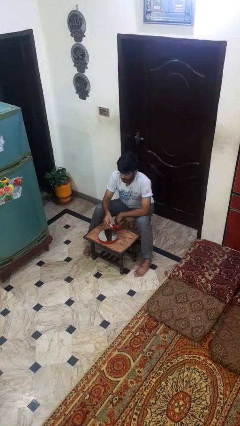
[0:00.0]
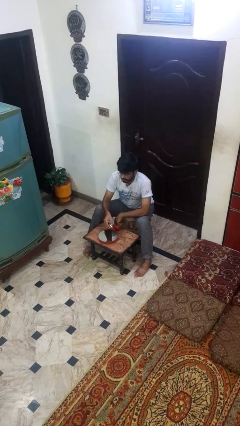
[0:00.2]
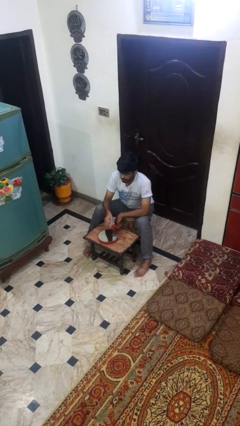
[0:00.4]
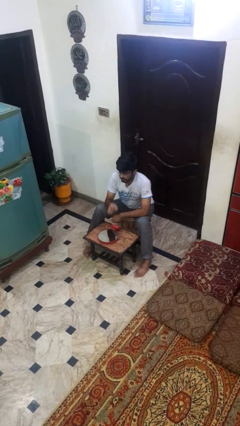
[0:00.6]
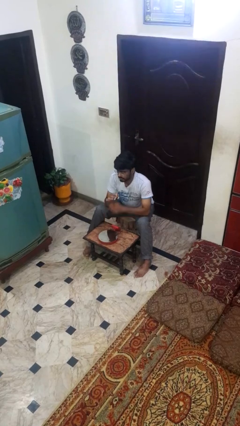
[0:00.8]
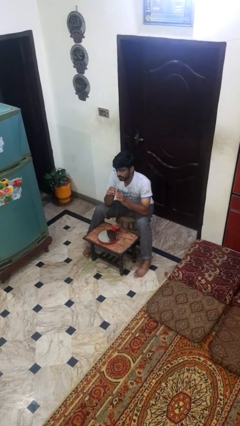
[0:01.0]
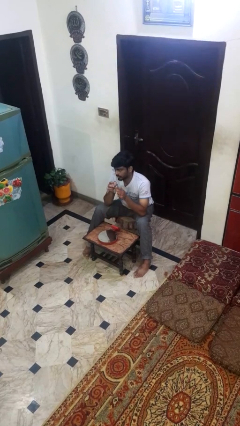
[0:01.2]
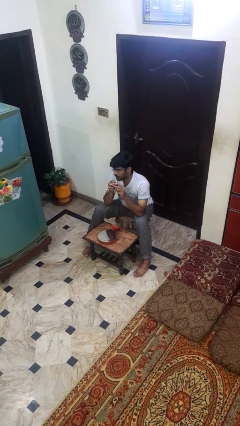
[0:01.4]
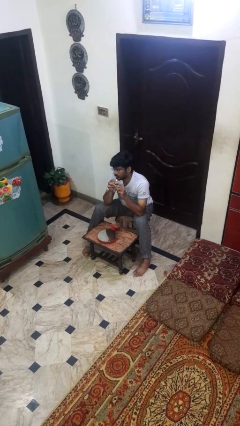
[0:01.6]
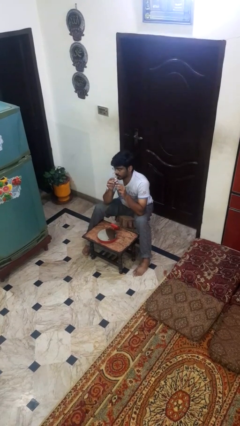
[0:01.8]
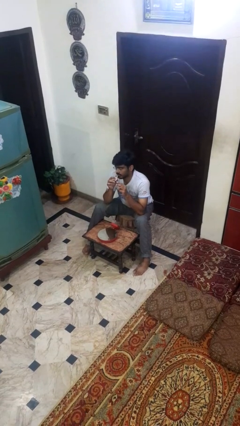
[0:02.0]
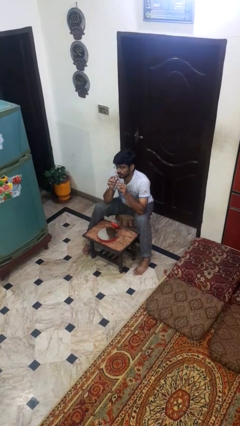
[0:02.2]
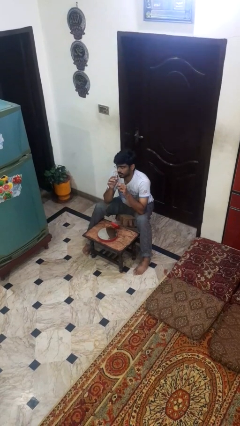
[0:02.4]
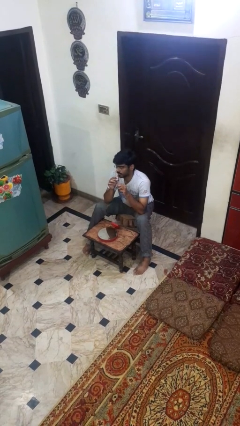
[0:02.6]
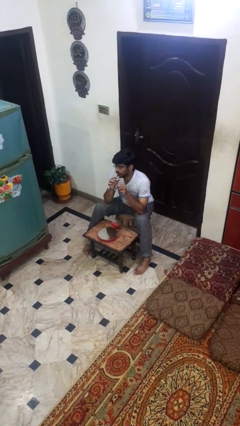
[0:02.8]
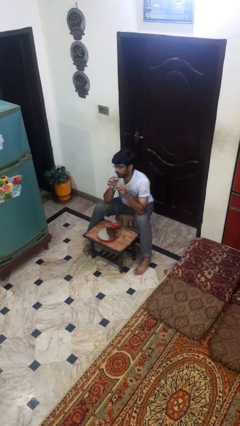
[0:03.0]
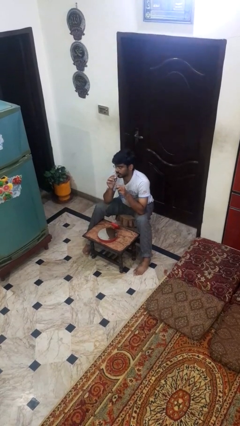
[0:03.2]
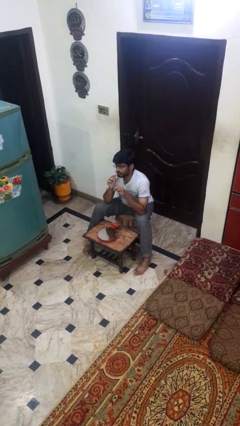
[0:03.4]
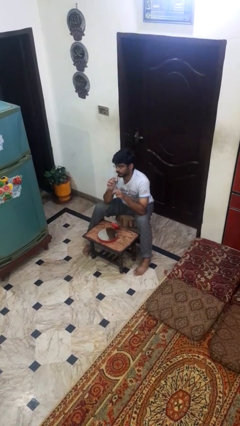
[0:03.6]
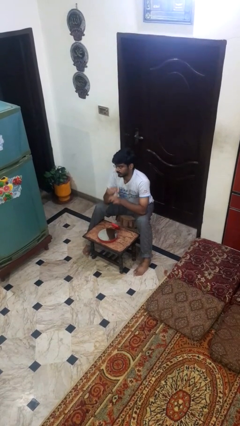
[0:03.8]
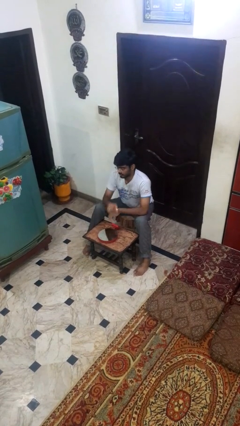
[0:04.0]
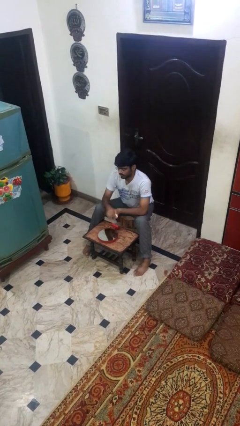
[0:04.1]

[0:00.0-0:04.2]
person applies lip makeup

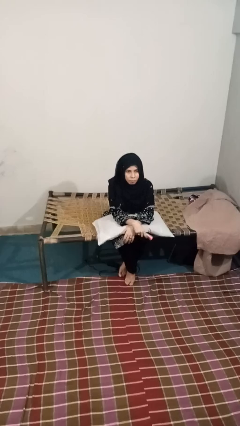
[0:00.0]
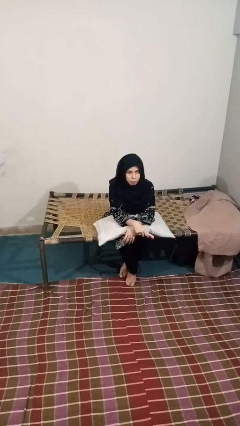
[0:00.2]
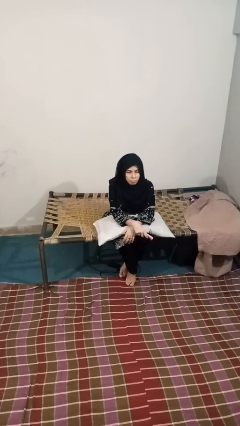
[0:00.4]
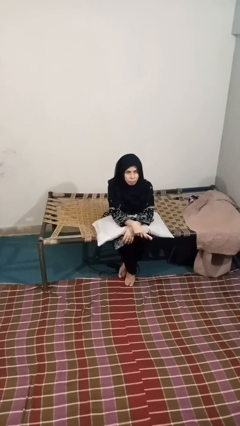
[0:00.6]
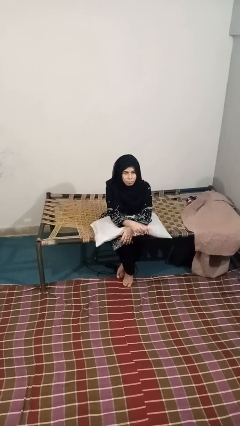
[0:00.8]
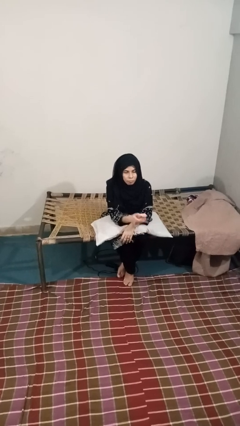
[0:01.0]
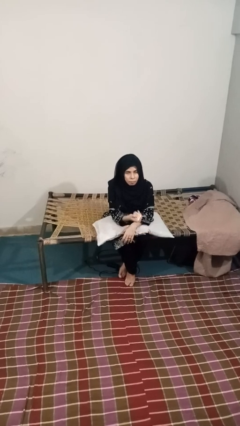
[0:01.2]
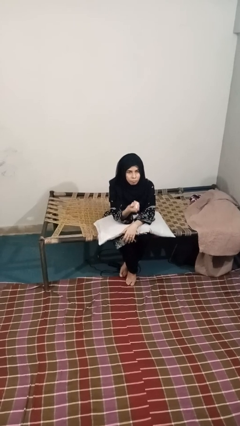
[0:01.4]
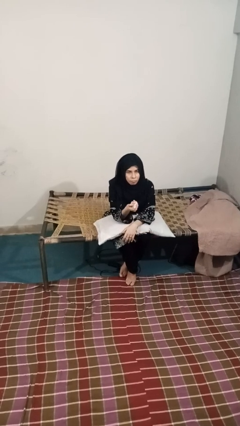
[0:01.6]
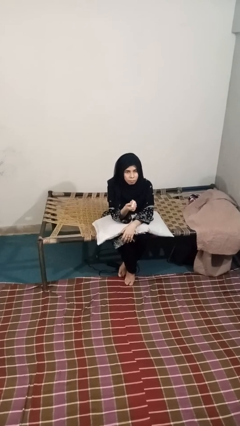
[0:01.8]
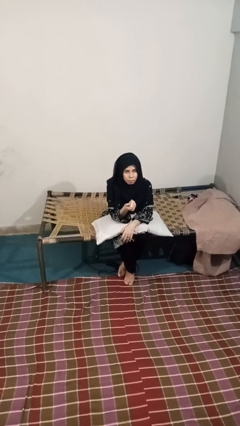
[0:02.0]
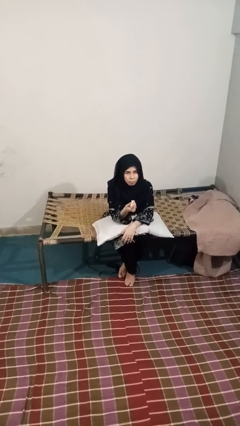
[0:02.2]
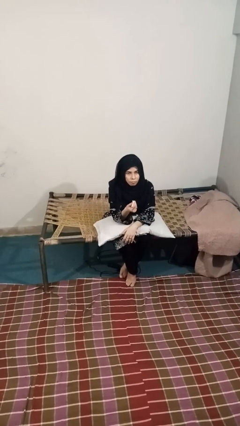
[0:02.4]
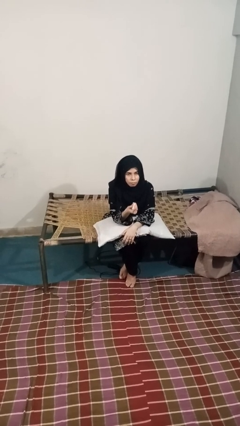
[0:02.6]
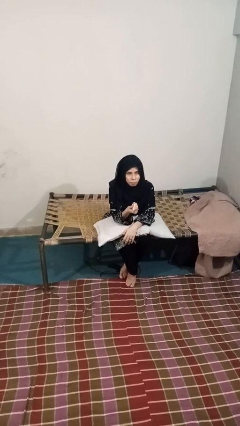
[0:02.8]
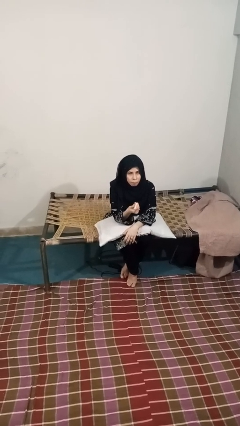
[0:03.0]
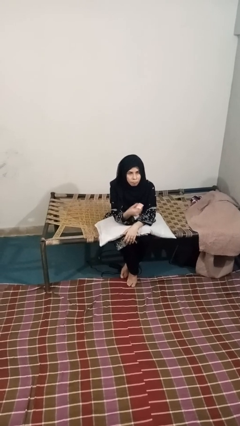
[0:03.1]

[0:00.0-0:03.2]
person uses television remote

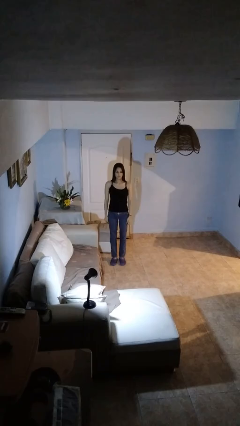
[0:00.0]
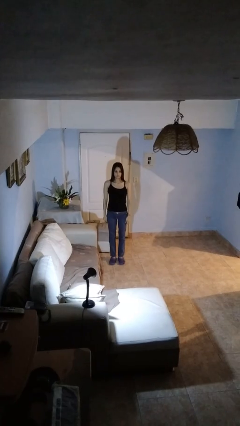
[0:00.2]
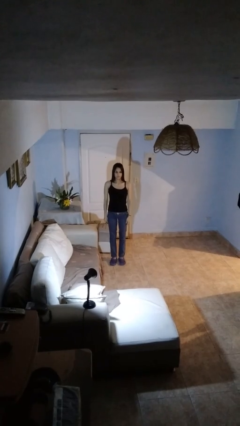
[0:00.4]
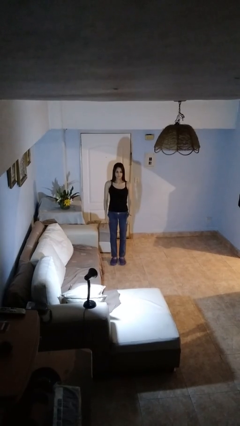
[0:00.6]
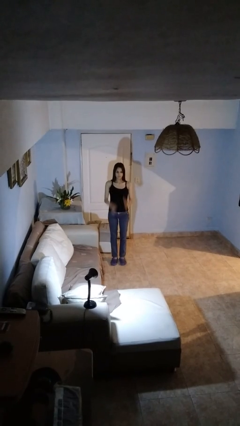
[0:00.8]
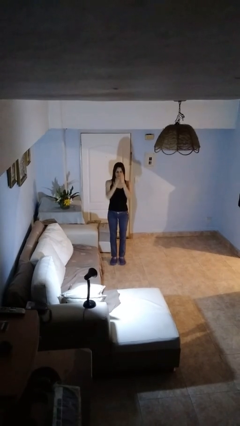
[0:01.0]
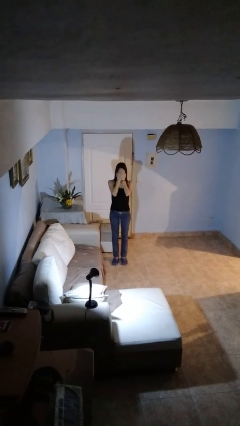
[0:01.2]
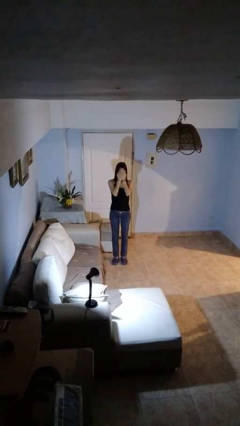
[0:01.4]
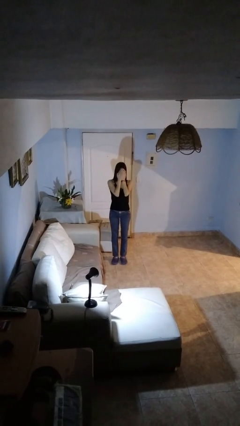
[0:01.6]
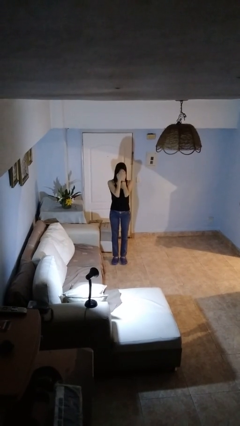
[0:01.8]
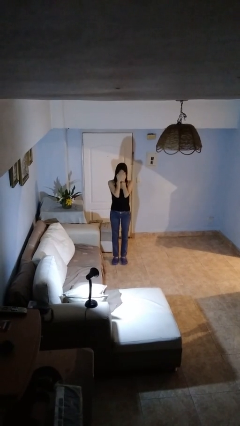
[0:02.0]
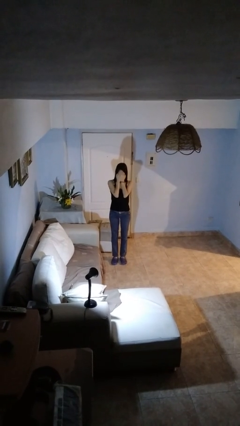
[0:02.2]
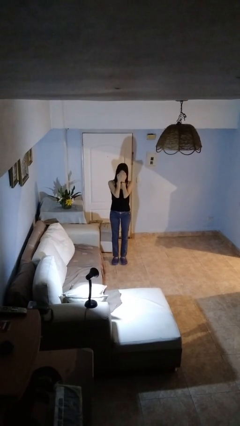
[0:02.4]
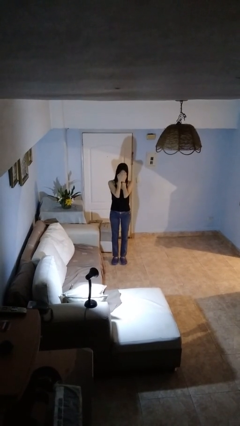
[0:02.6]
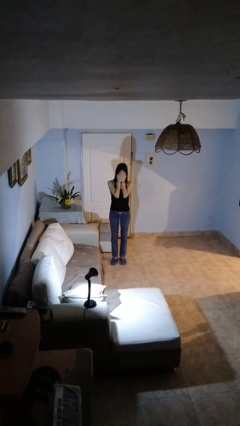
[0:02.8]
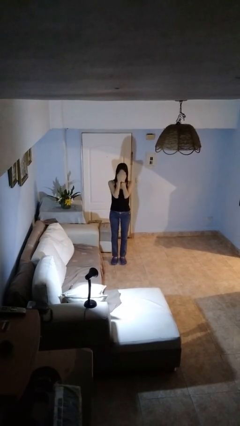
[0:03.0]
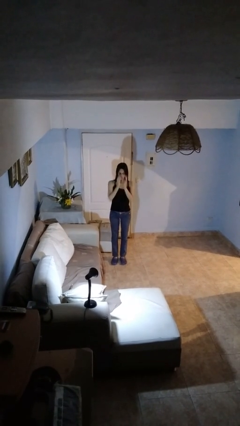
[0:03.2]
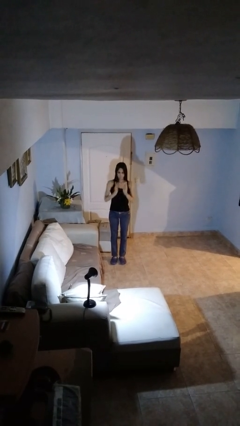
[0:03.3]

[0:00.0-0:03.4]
person covers face with hands

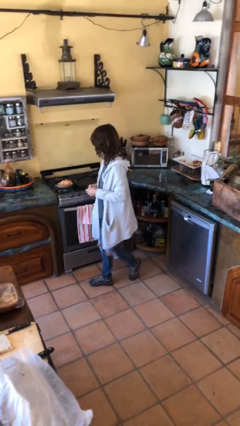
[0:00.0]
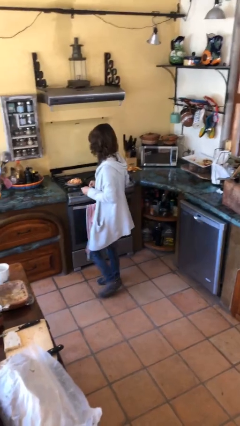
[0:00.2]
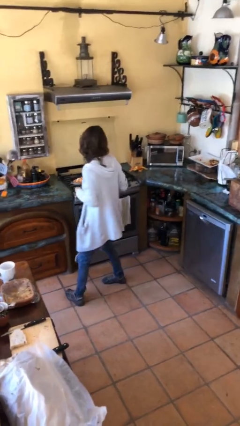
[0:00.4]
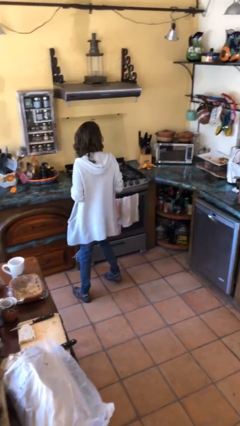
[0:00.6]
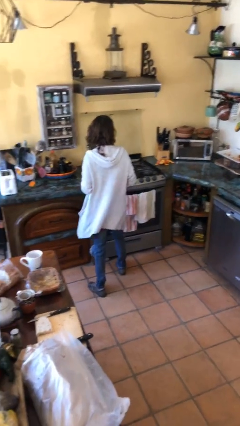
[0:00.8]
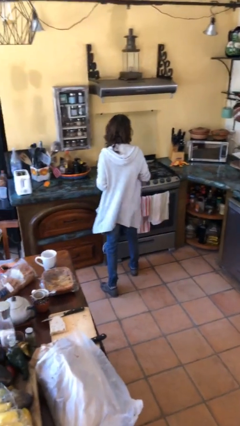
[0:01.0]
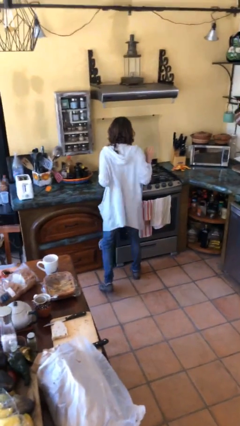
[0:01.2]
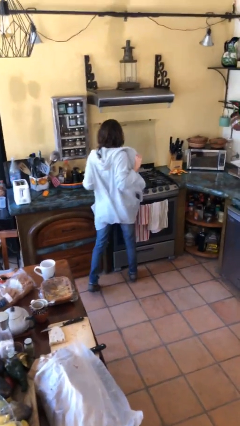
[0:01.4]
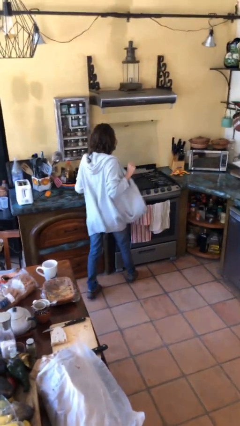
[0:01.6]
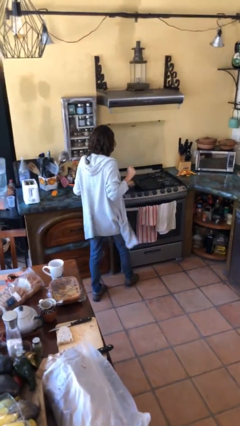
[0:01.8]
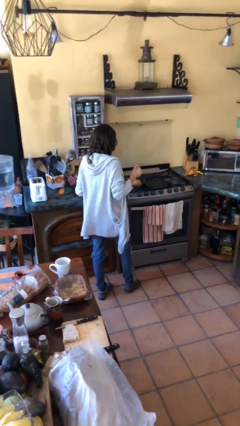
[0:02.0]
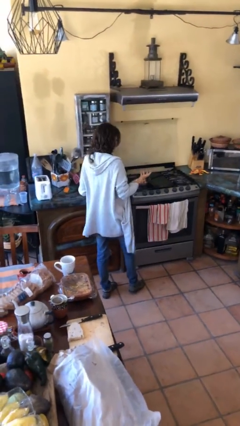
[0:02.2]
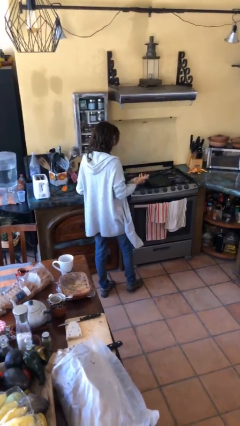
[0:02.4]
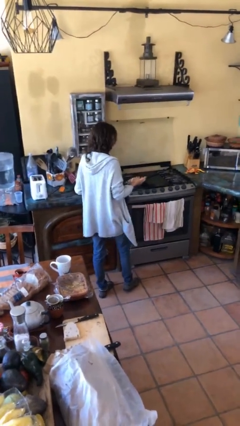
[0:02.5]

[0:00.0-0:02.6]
person burns hand

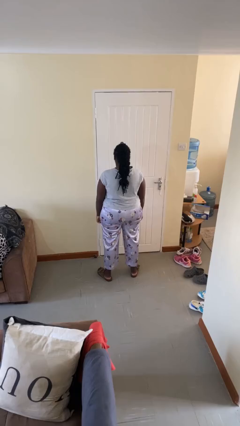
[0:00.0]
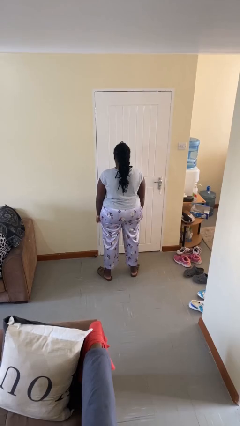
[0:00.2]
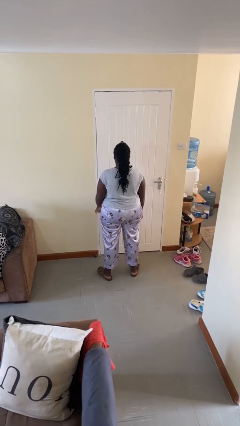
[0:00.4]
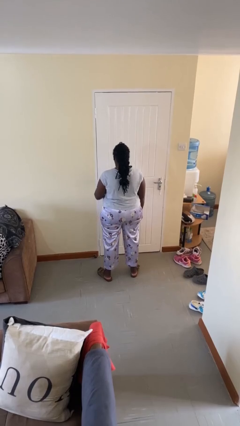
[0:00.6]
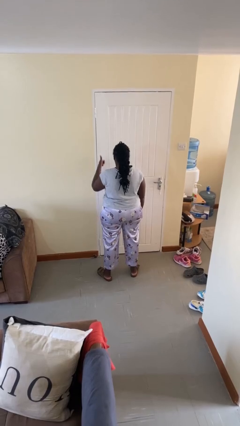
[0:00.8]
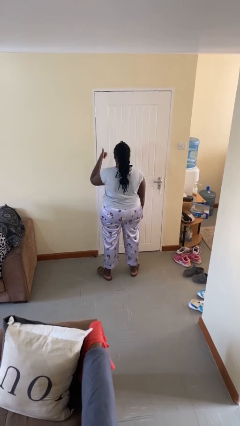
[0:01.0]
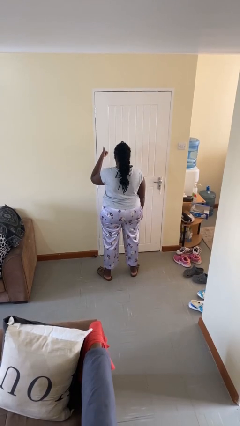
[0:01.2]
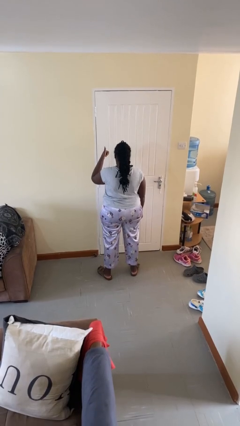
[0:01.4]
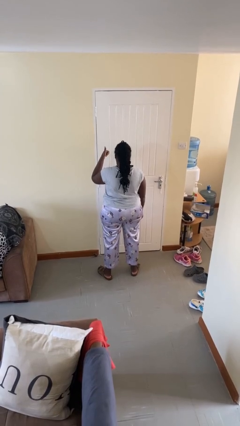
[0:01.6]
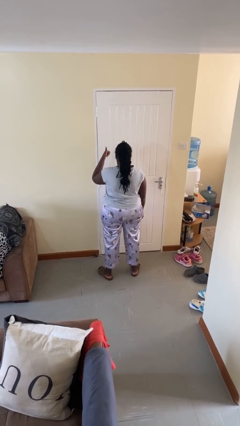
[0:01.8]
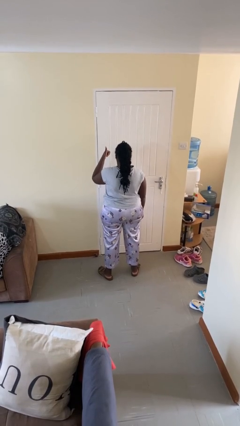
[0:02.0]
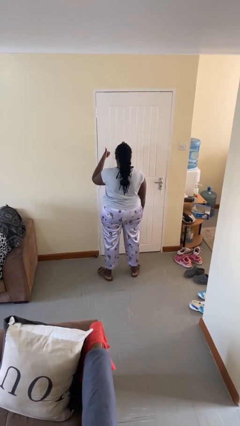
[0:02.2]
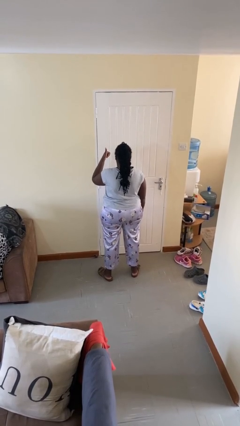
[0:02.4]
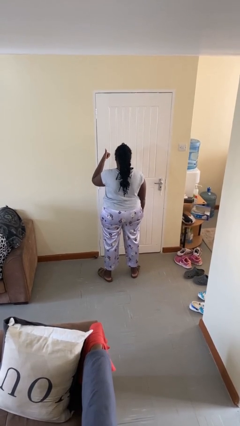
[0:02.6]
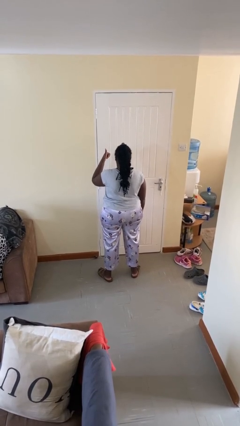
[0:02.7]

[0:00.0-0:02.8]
person gestures thumbs up

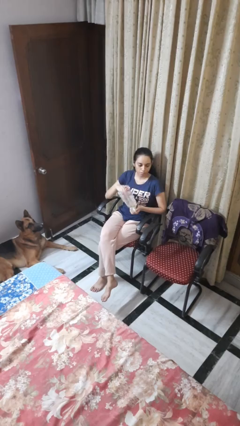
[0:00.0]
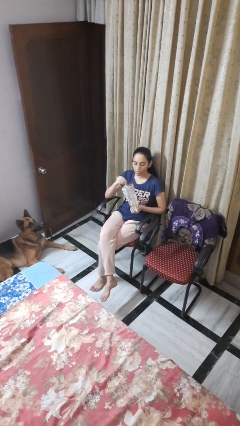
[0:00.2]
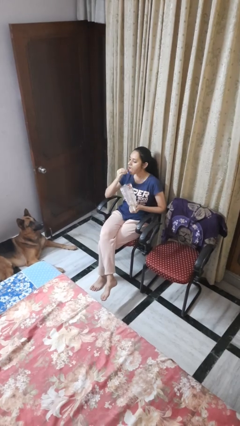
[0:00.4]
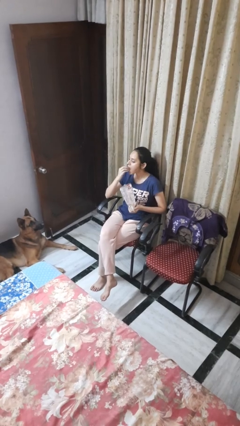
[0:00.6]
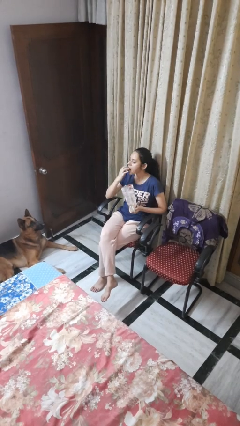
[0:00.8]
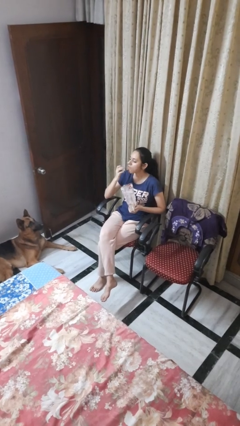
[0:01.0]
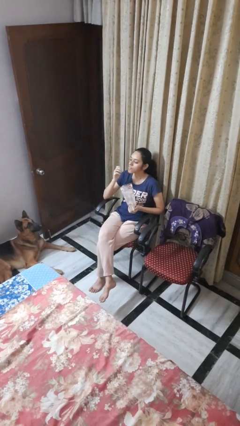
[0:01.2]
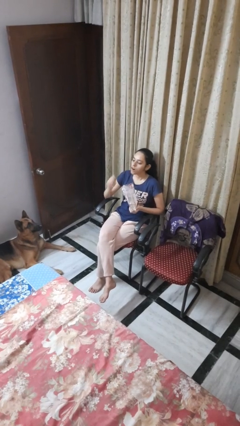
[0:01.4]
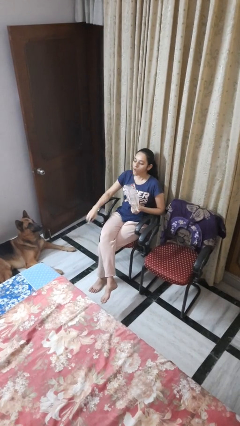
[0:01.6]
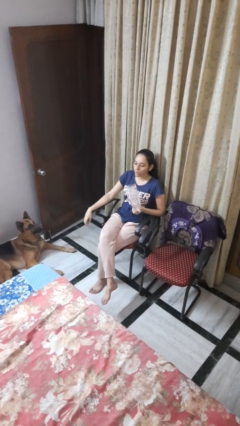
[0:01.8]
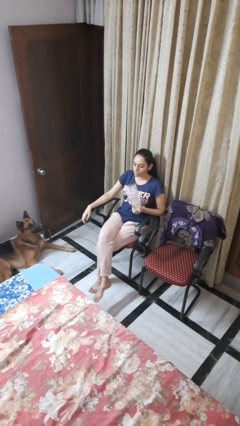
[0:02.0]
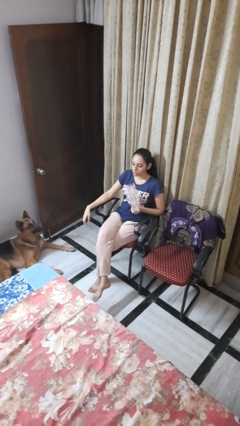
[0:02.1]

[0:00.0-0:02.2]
person eats snack from bag
